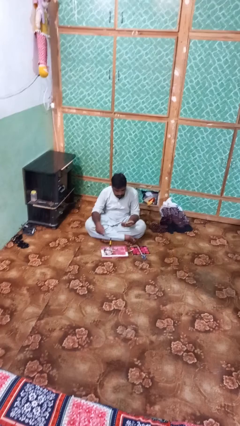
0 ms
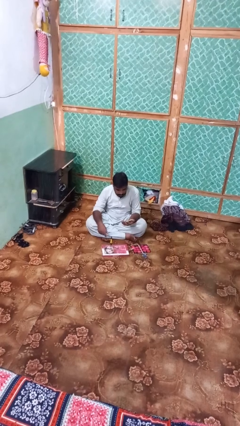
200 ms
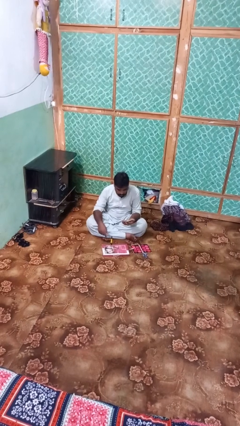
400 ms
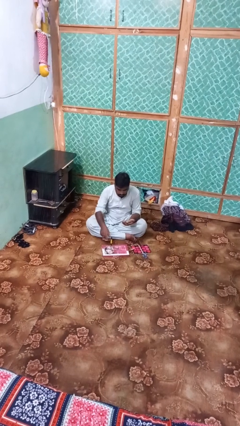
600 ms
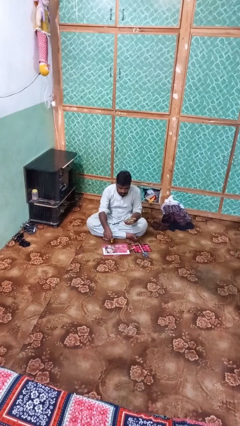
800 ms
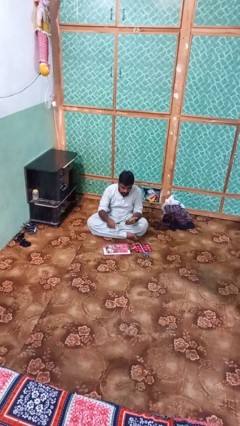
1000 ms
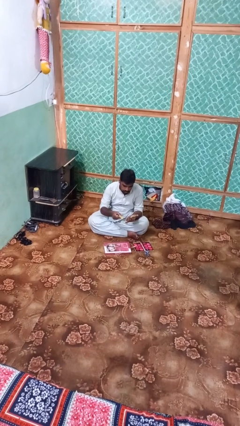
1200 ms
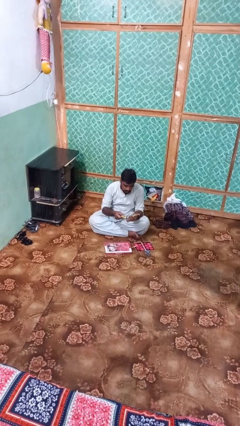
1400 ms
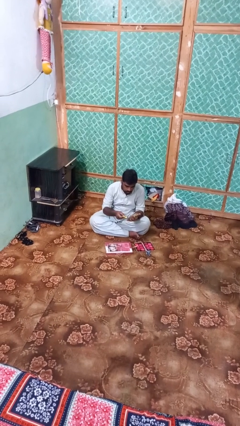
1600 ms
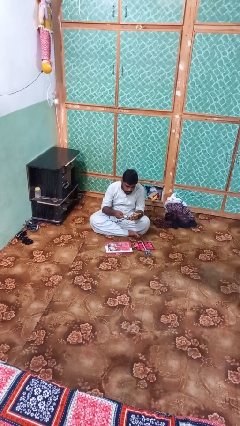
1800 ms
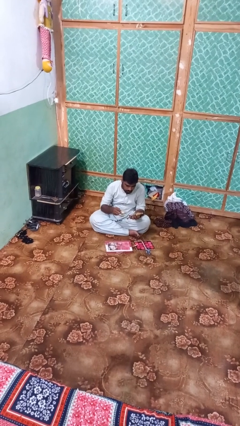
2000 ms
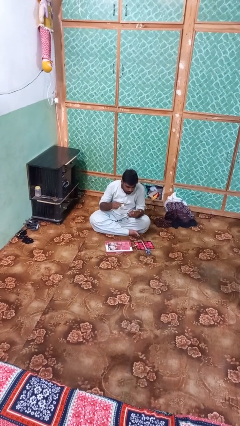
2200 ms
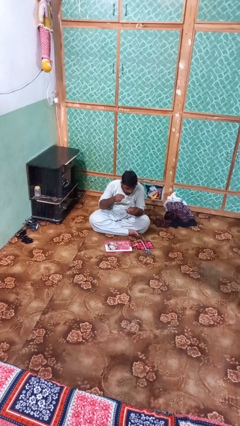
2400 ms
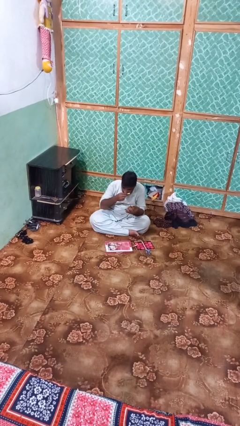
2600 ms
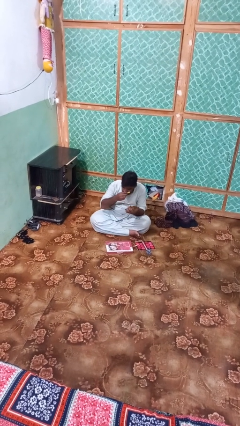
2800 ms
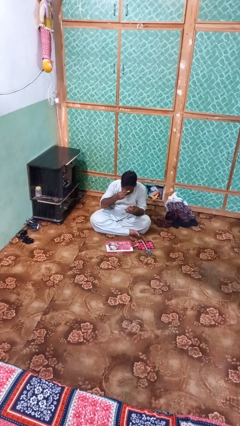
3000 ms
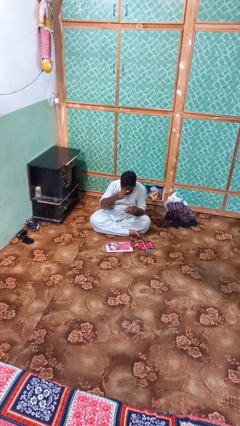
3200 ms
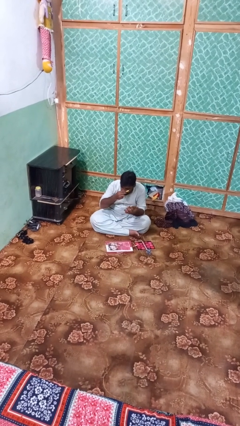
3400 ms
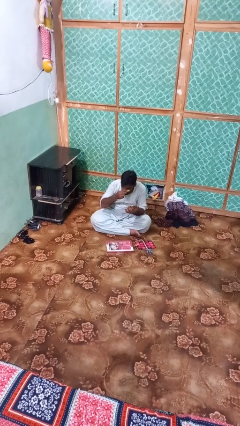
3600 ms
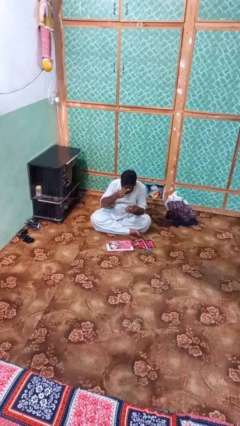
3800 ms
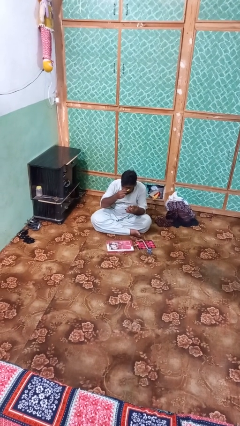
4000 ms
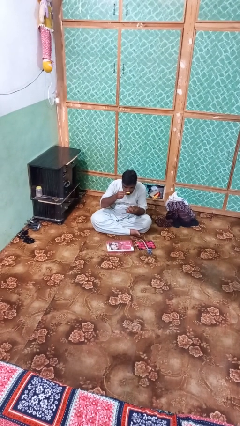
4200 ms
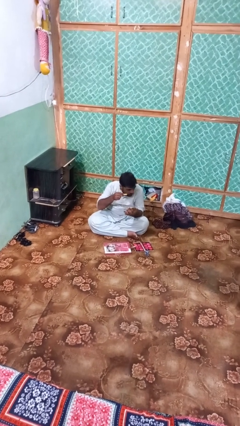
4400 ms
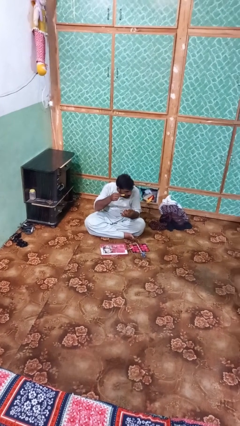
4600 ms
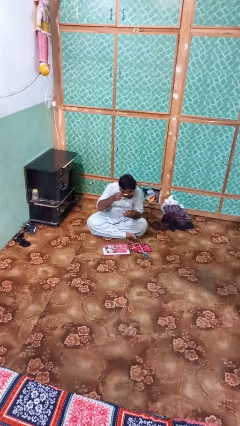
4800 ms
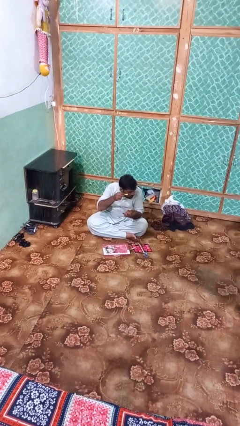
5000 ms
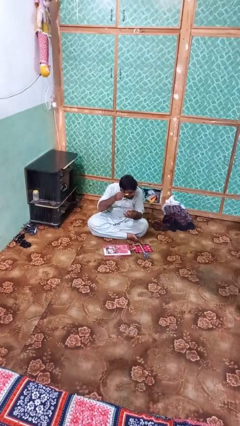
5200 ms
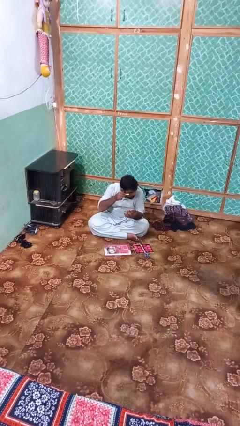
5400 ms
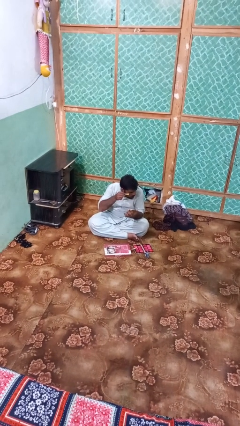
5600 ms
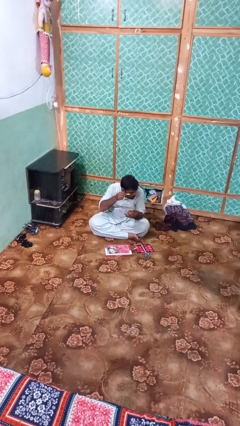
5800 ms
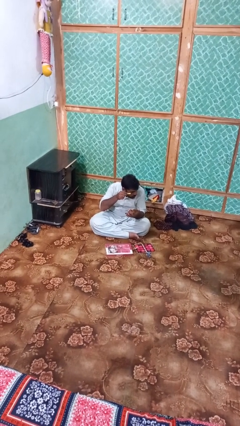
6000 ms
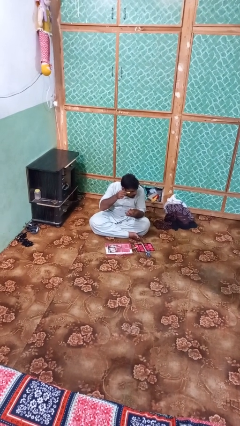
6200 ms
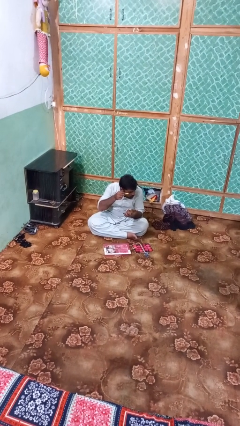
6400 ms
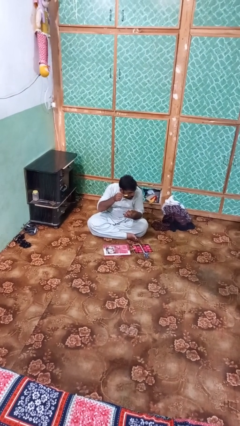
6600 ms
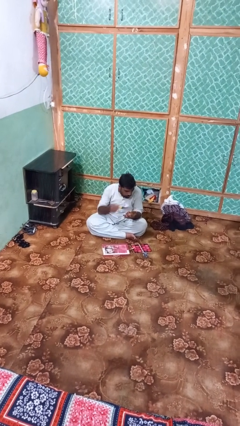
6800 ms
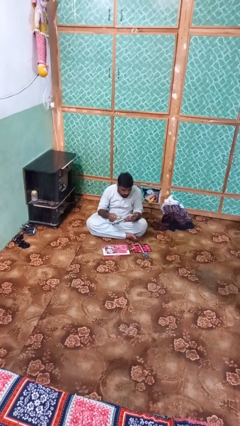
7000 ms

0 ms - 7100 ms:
person applies eye makeup

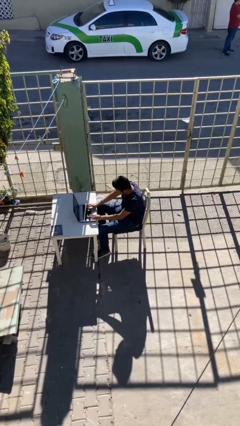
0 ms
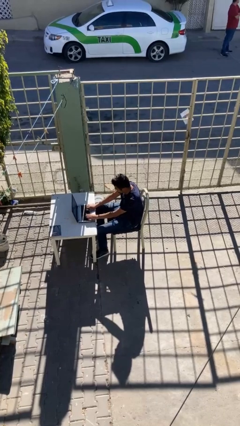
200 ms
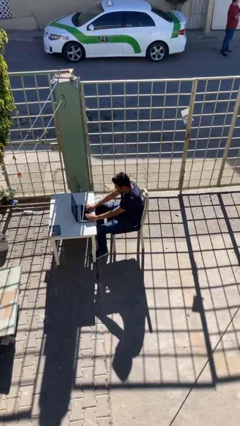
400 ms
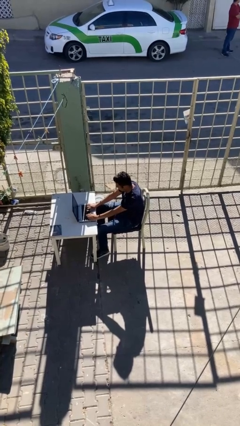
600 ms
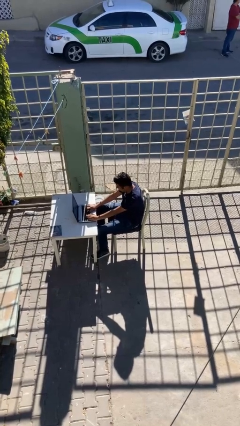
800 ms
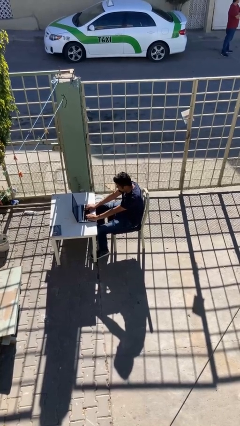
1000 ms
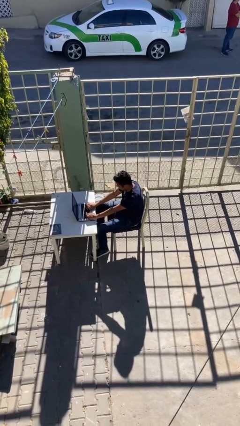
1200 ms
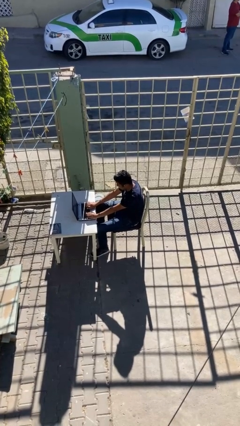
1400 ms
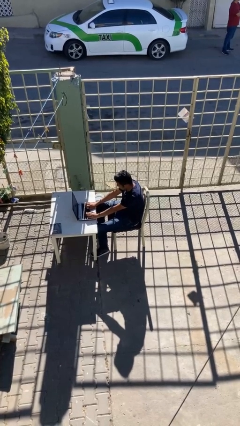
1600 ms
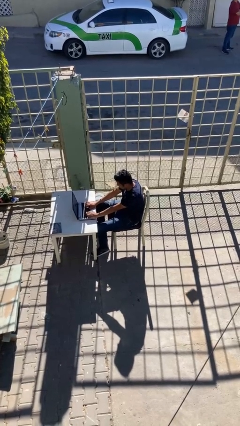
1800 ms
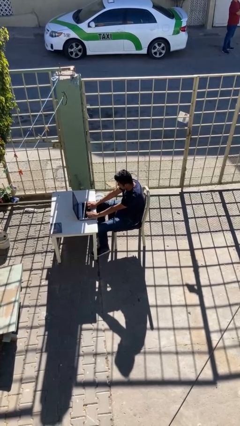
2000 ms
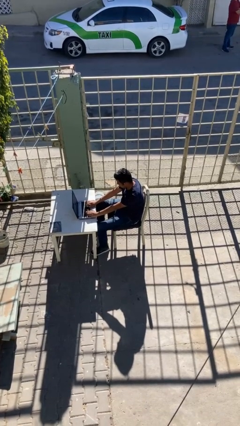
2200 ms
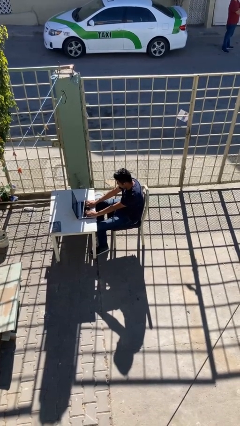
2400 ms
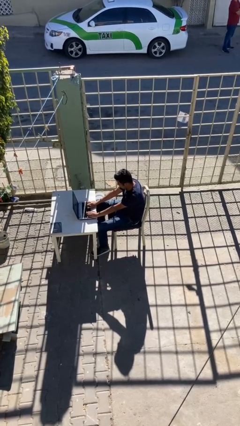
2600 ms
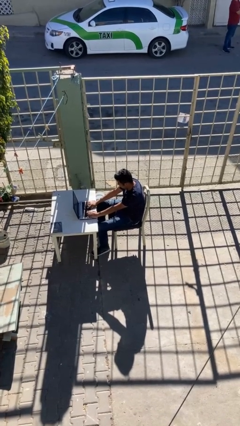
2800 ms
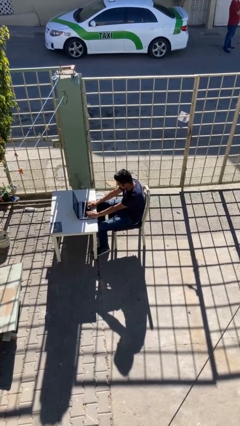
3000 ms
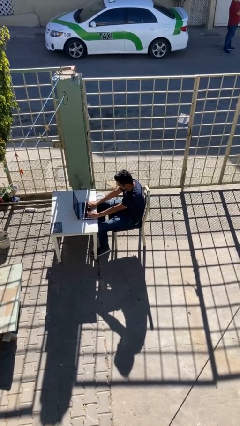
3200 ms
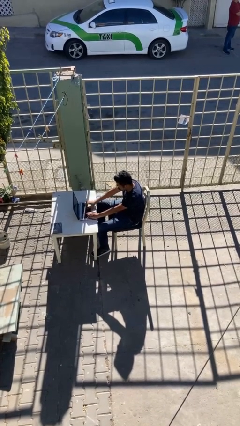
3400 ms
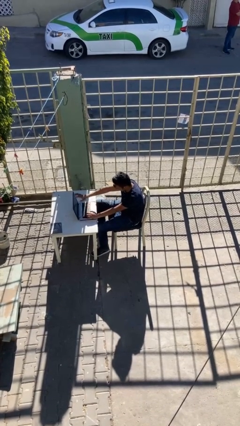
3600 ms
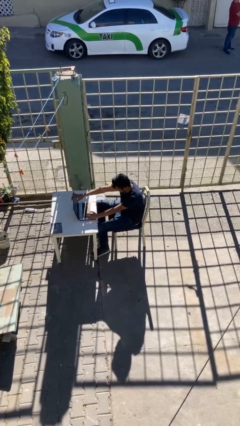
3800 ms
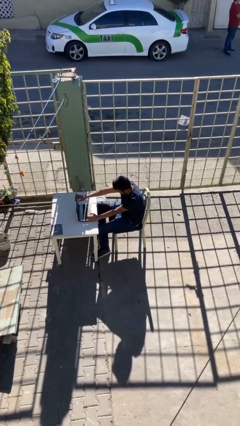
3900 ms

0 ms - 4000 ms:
person interacts with laptop

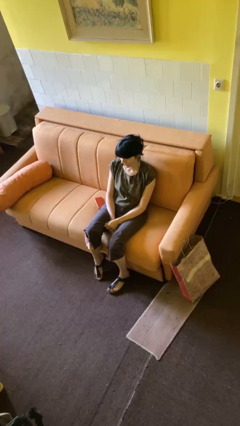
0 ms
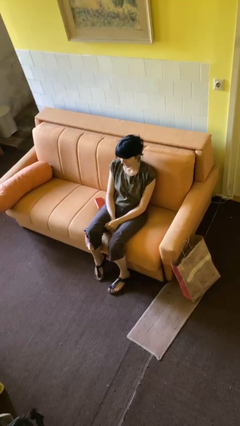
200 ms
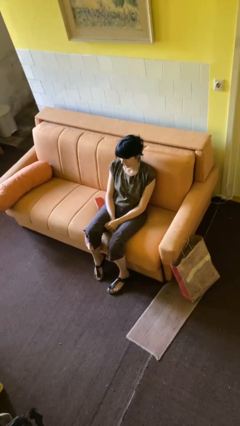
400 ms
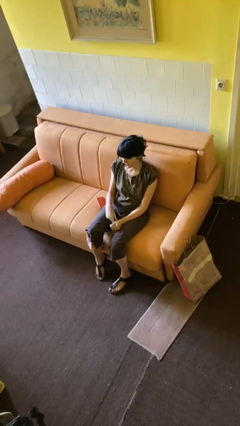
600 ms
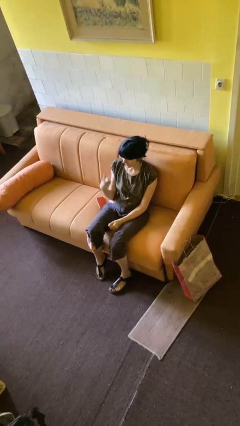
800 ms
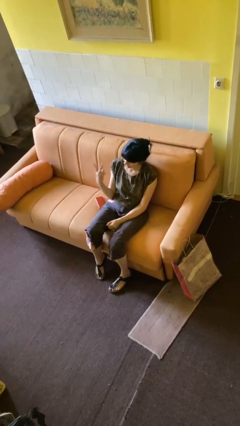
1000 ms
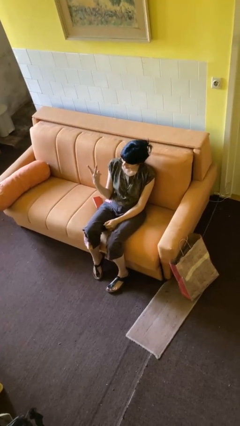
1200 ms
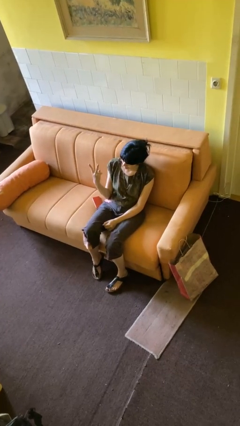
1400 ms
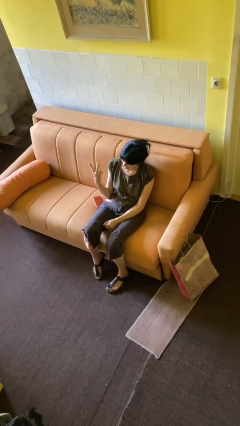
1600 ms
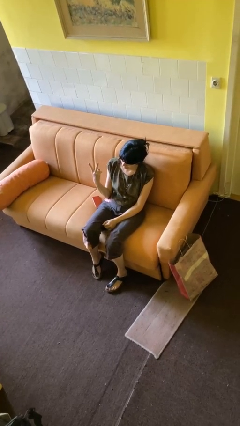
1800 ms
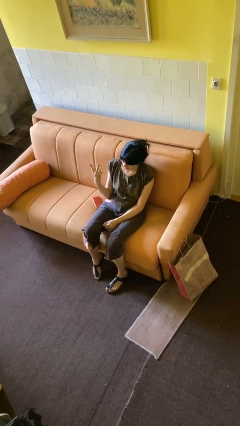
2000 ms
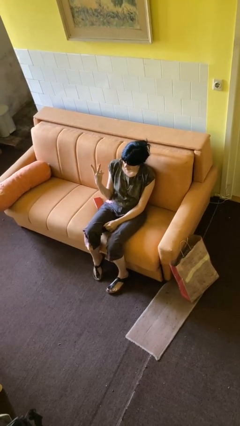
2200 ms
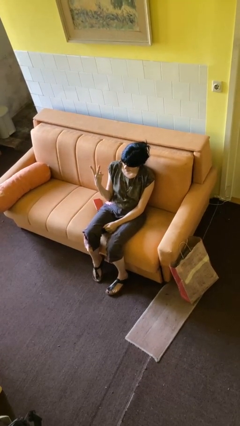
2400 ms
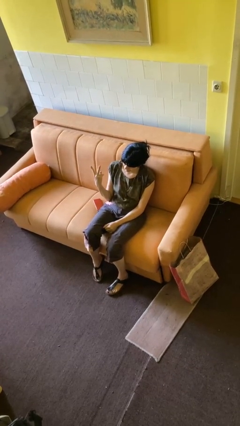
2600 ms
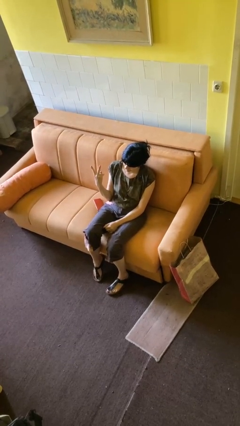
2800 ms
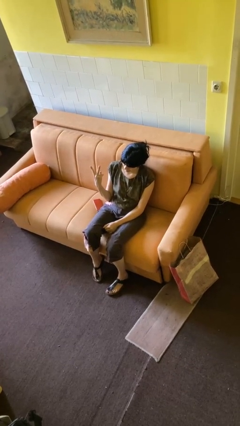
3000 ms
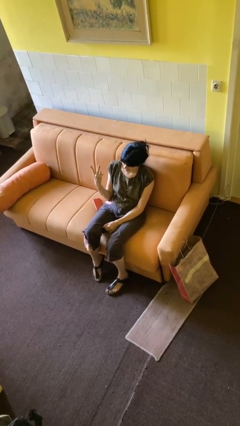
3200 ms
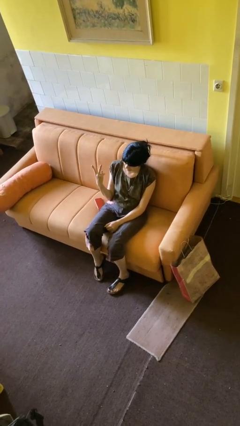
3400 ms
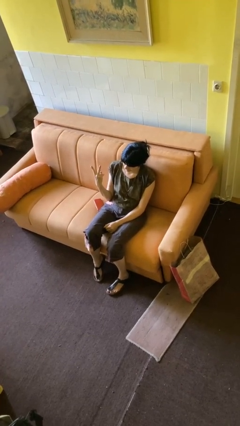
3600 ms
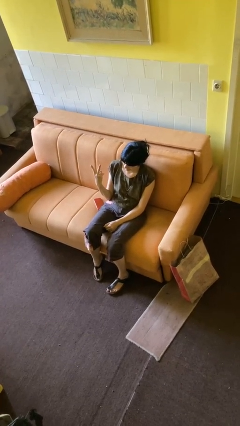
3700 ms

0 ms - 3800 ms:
person gestures peace

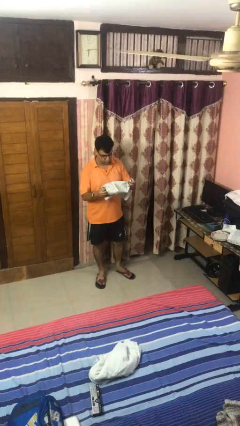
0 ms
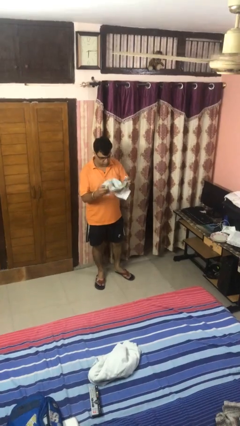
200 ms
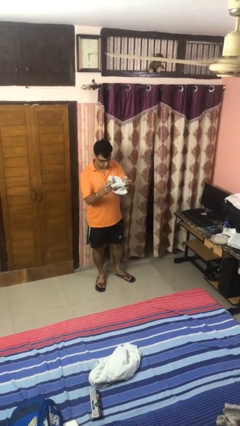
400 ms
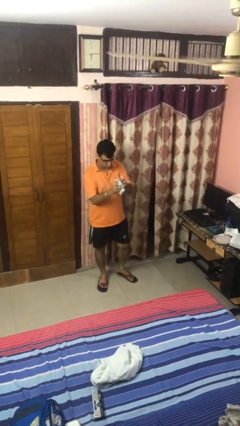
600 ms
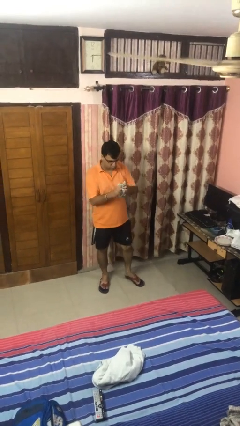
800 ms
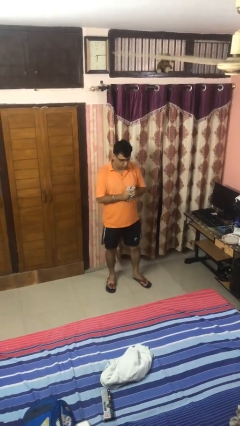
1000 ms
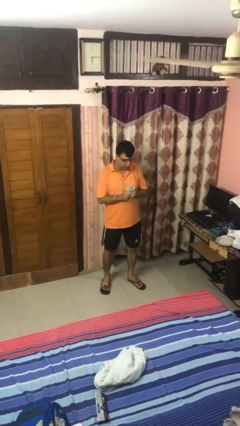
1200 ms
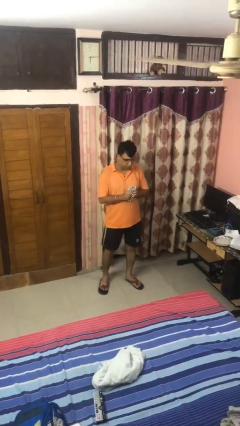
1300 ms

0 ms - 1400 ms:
person crumples paper

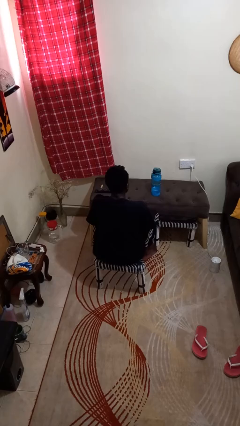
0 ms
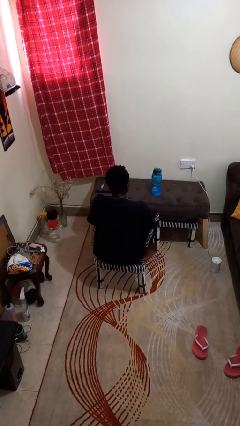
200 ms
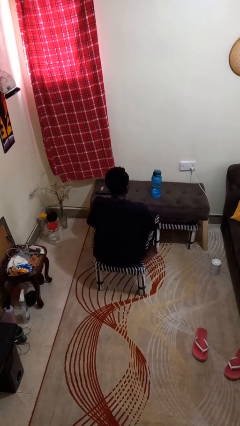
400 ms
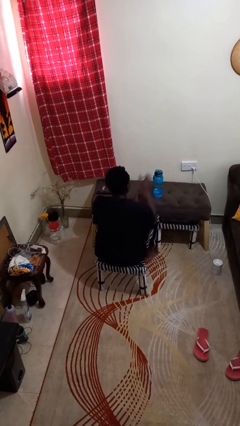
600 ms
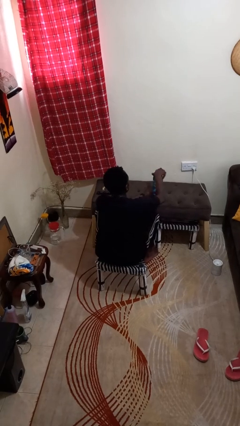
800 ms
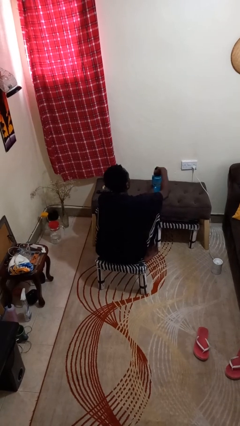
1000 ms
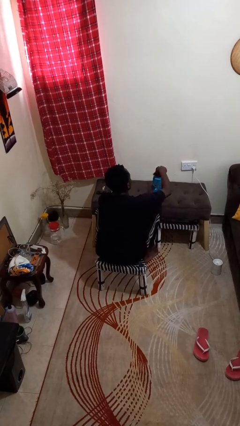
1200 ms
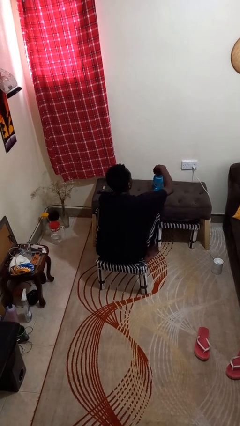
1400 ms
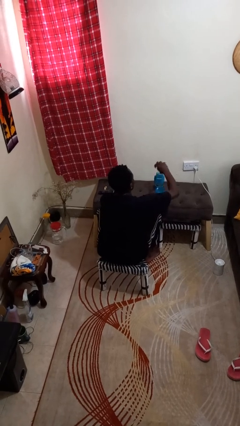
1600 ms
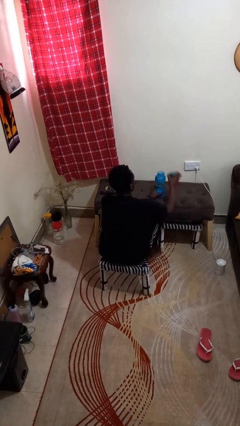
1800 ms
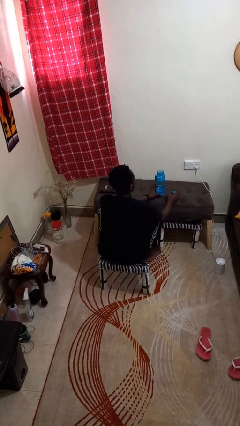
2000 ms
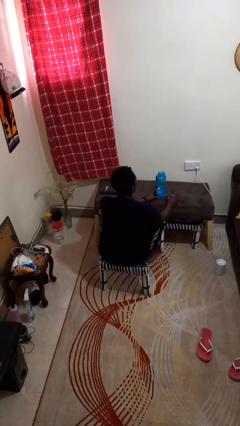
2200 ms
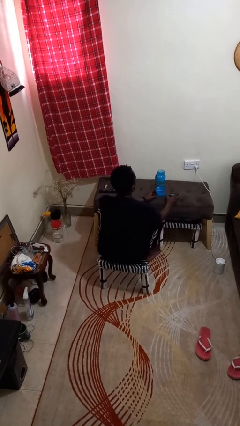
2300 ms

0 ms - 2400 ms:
person opens jar
